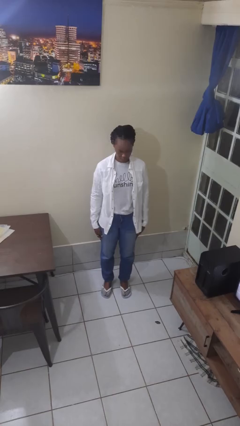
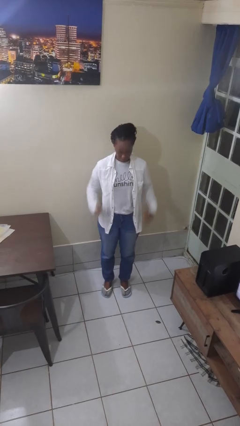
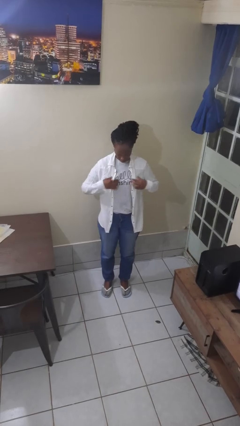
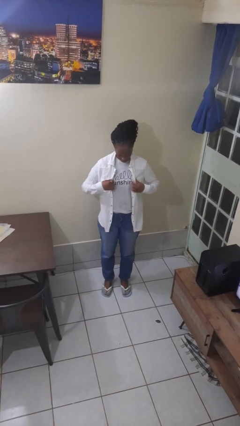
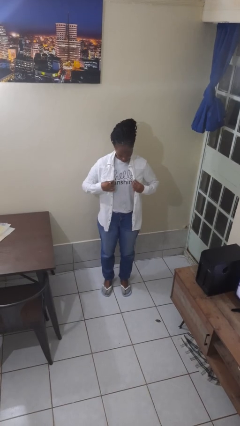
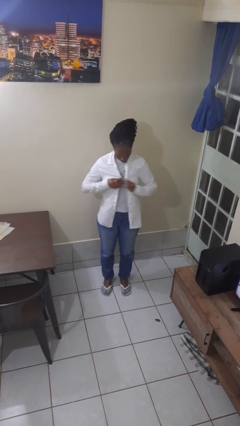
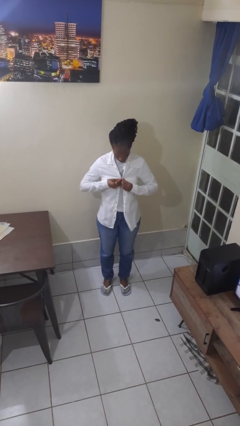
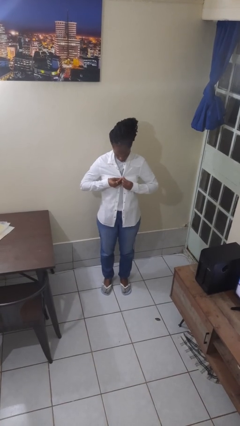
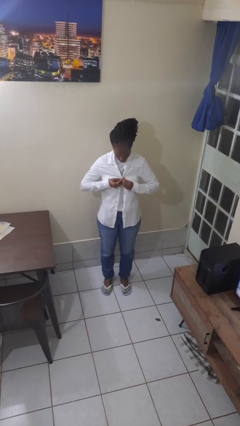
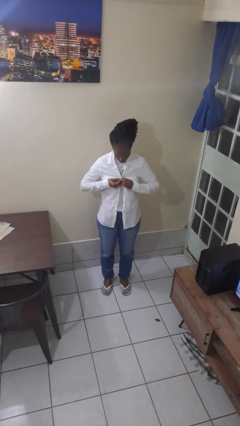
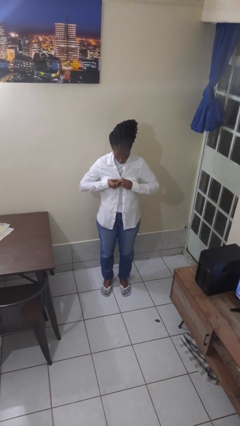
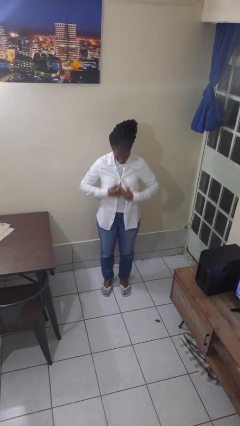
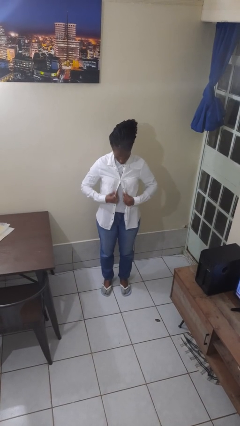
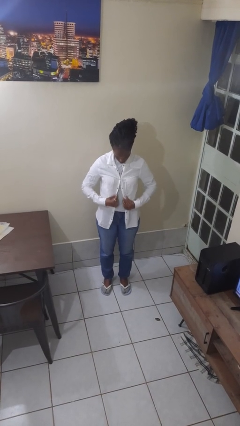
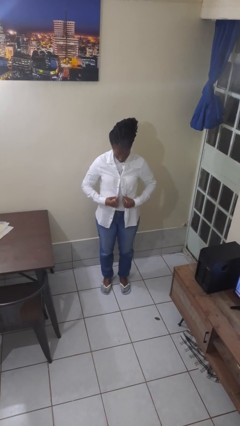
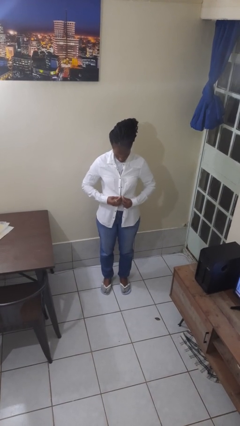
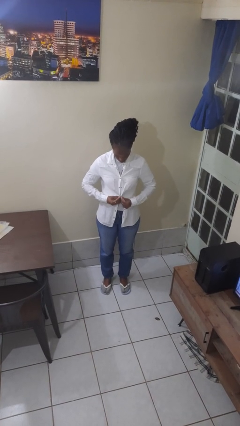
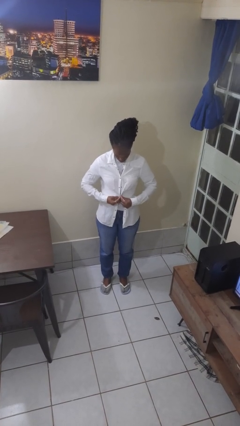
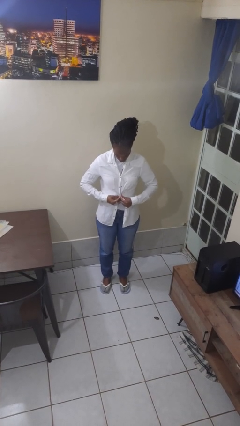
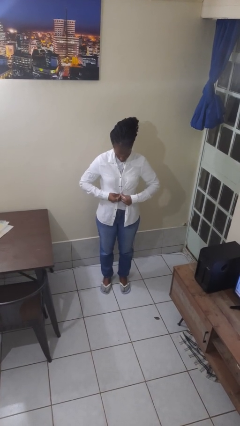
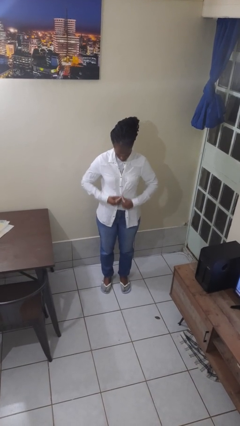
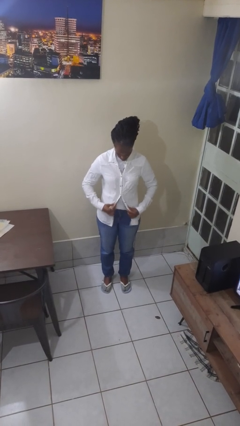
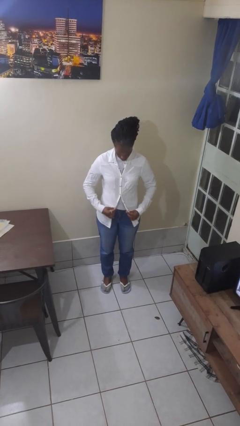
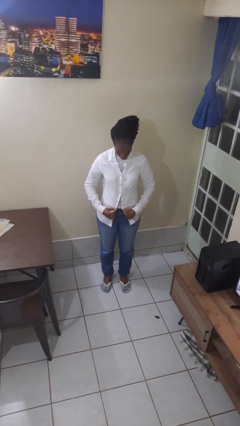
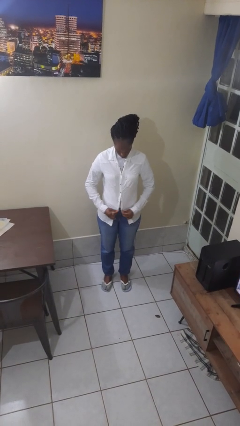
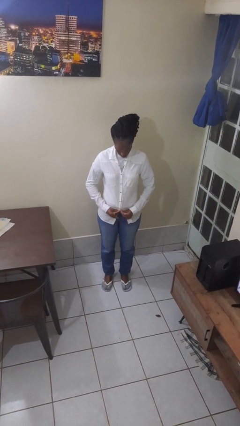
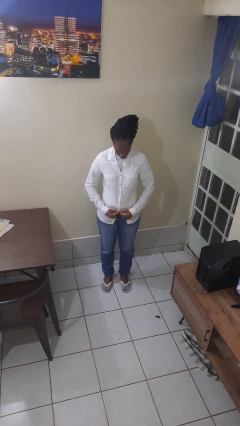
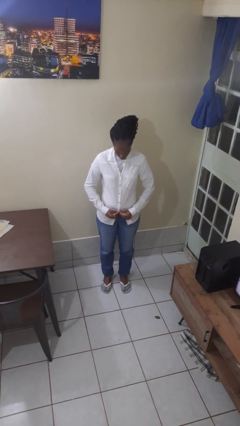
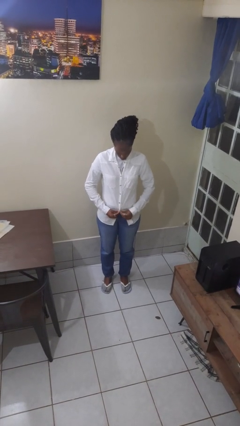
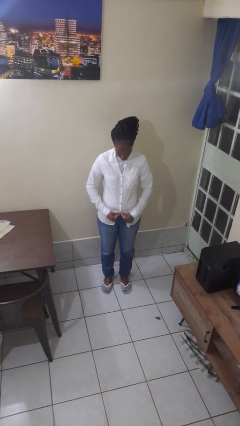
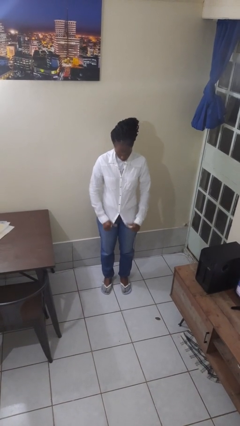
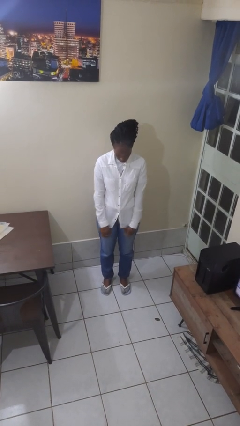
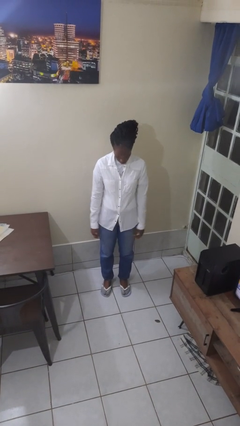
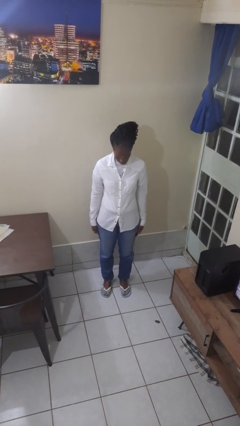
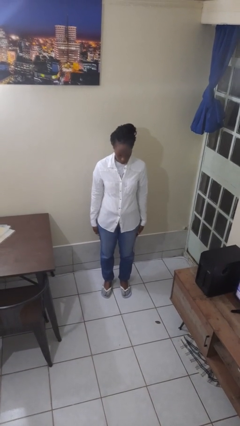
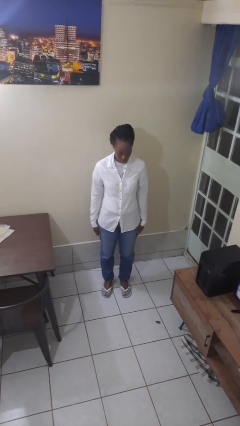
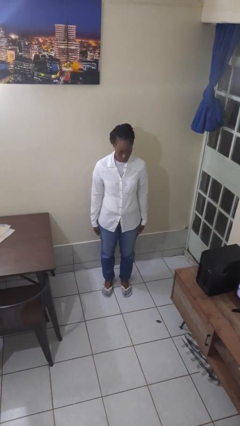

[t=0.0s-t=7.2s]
person buttons shirt

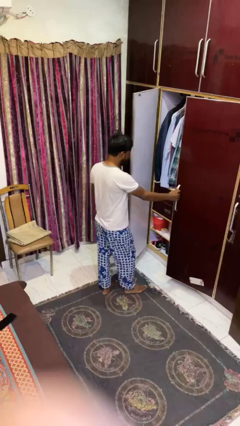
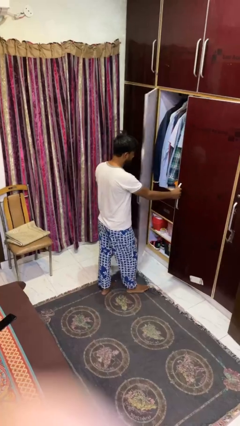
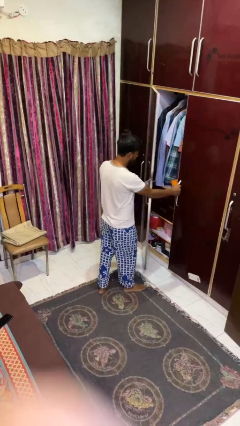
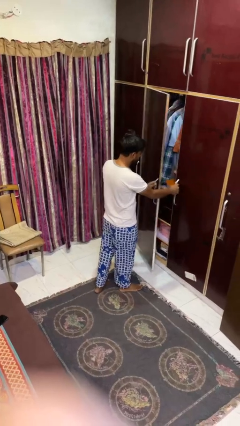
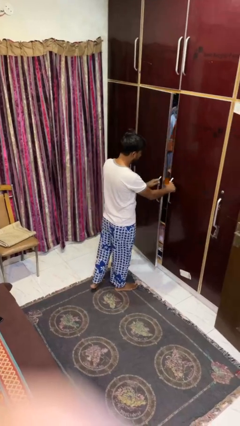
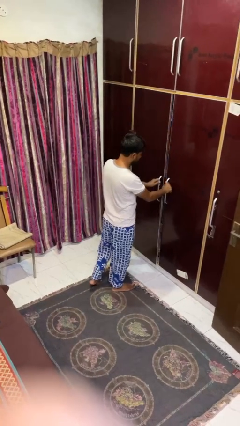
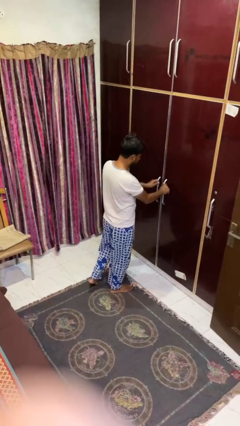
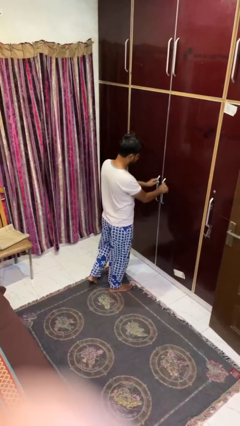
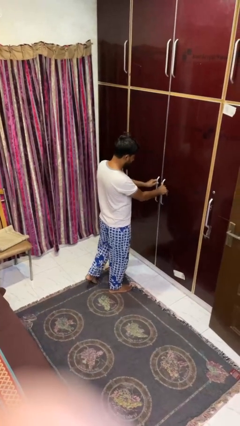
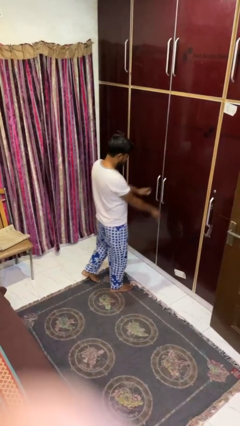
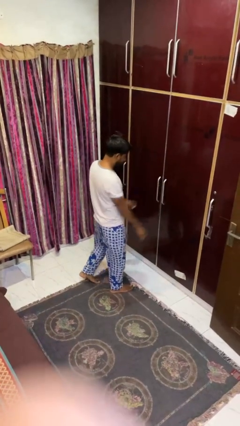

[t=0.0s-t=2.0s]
person closes closet door

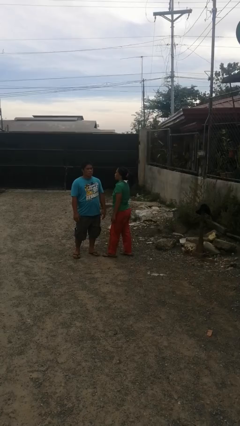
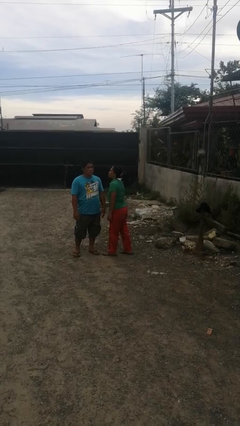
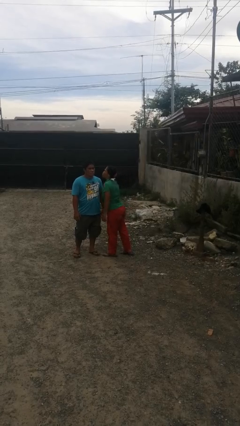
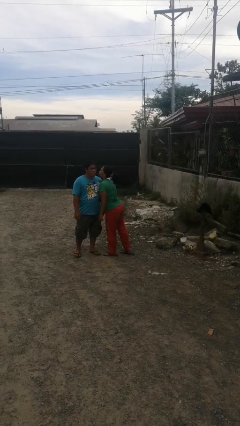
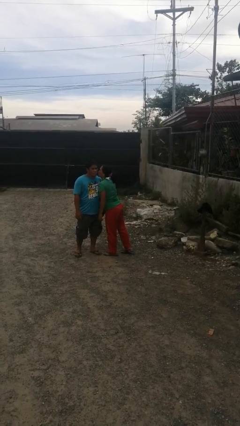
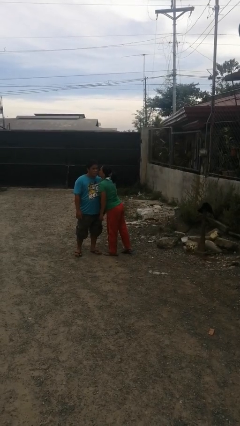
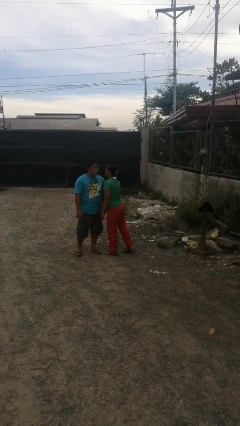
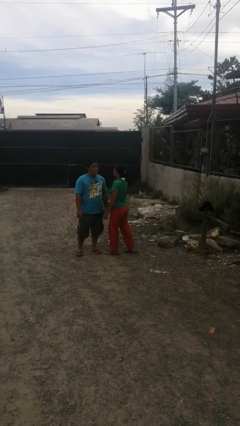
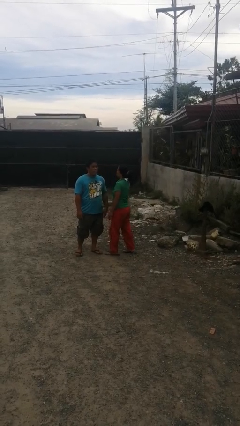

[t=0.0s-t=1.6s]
person kisses cheek of person

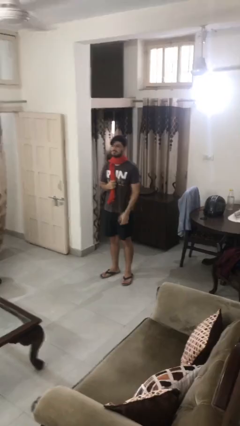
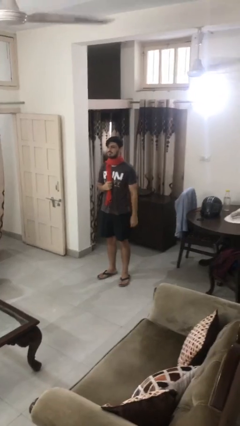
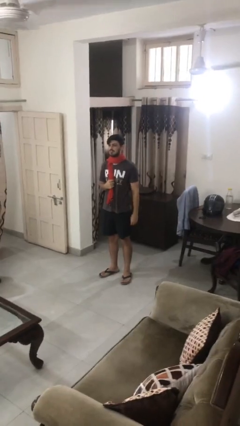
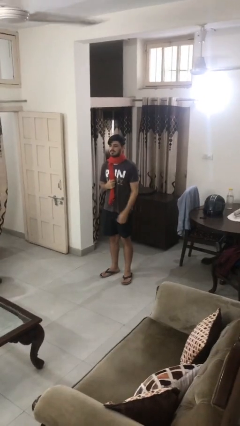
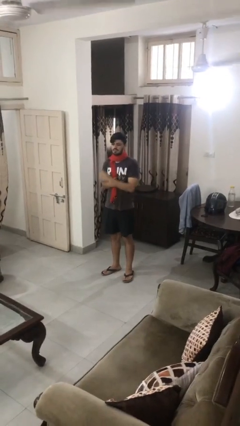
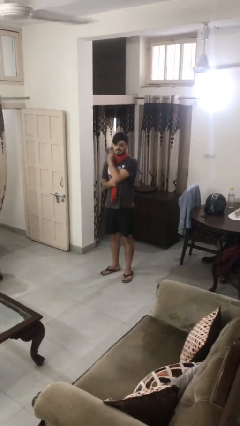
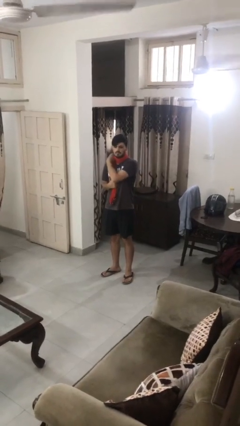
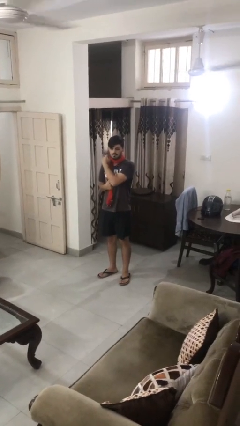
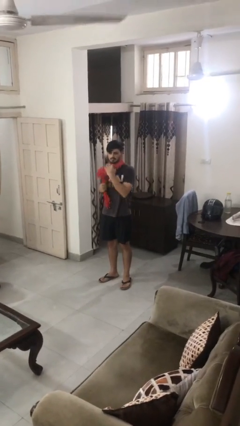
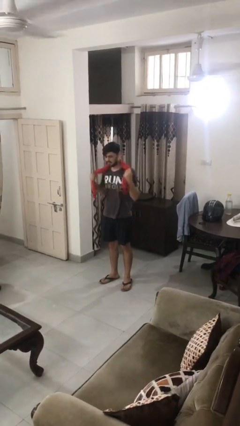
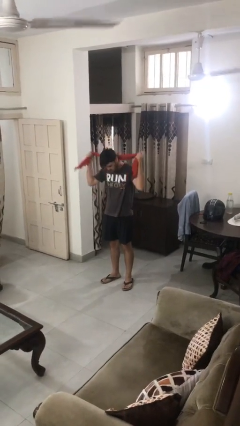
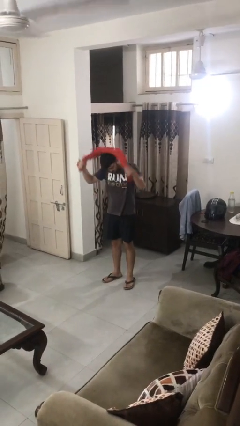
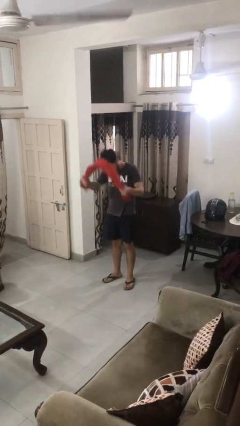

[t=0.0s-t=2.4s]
person takes off scarf

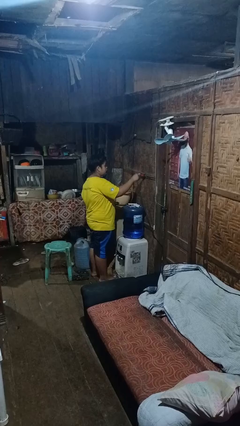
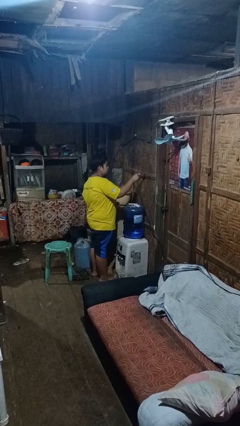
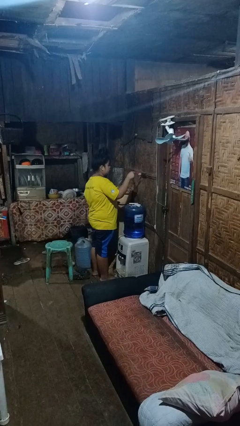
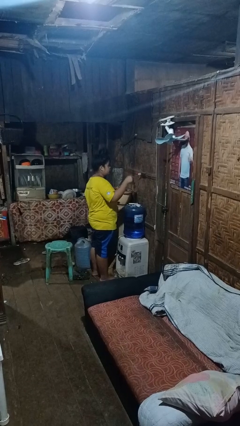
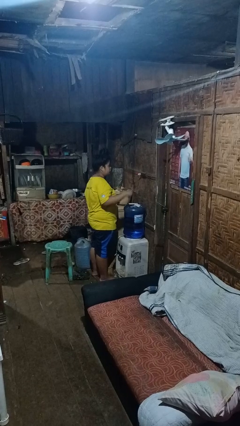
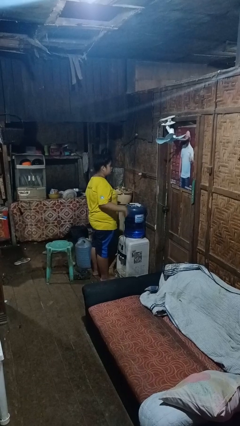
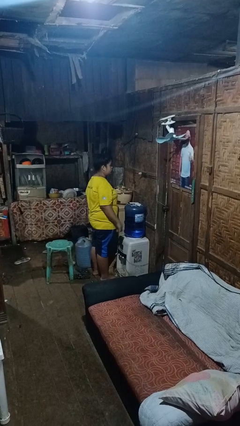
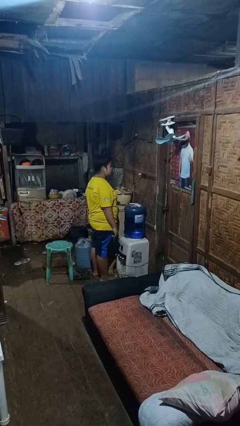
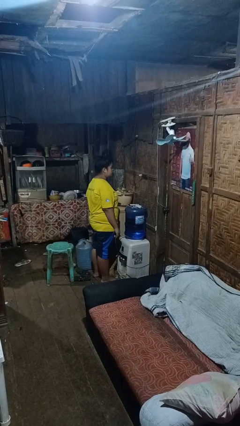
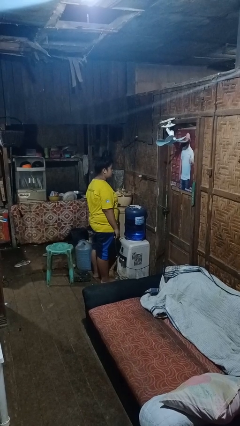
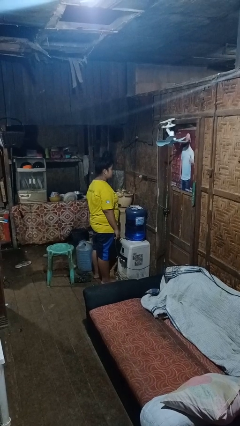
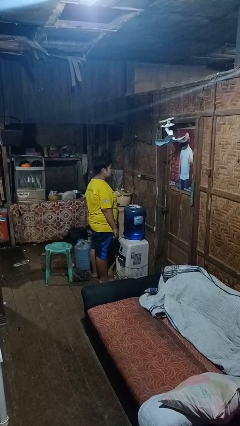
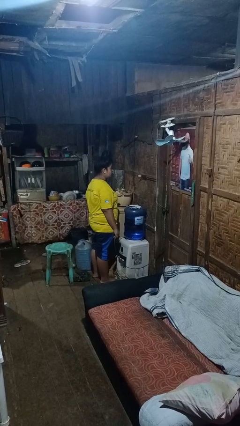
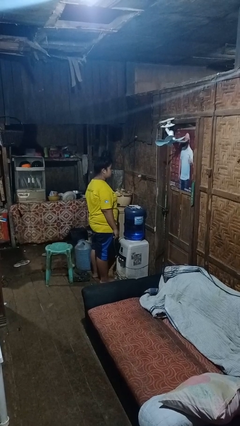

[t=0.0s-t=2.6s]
person unplugs from electrical socket

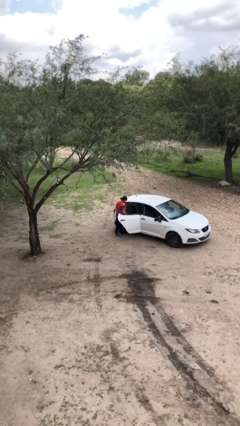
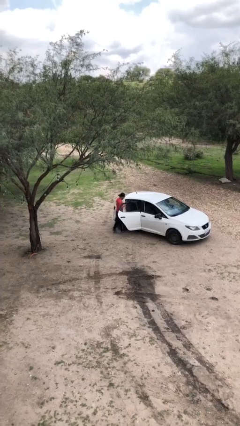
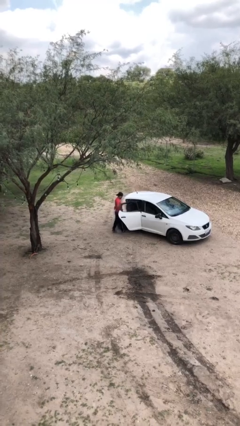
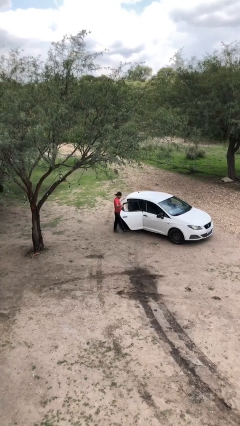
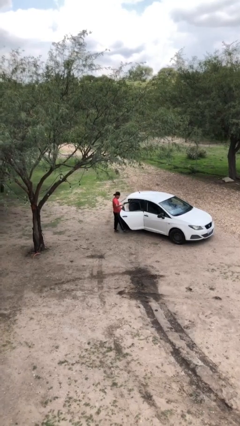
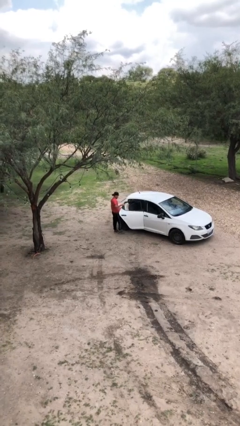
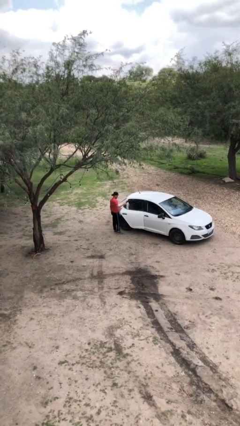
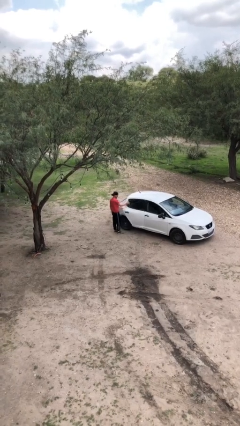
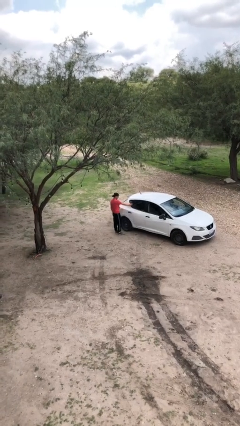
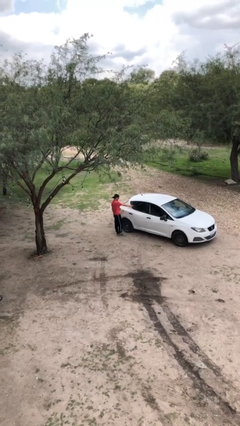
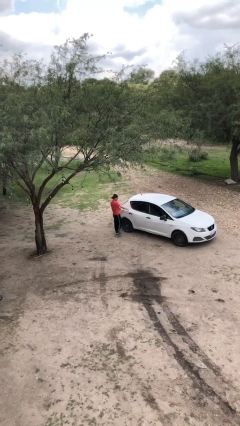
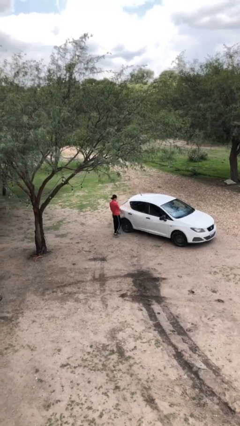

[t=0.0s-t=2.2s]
person closes car door
